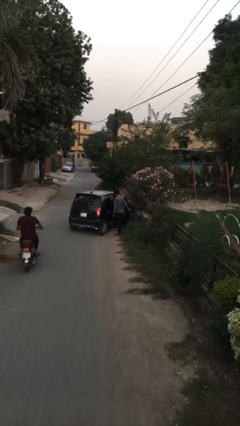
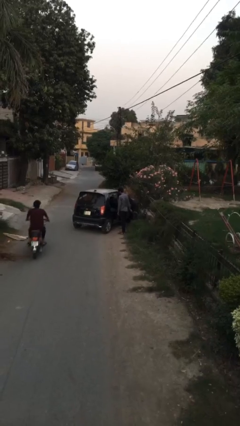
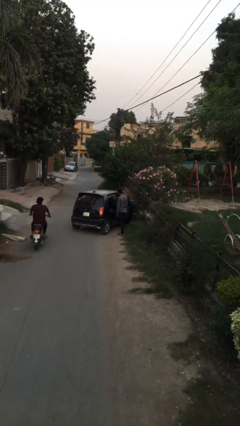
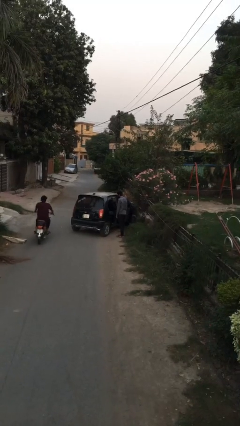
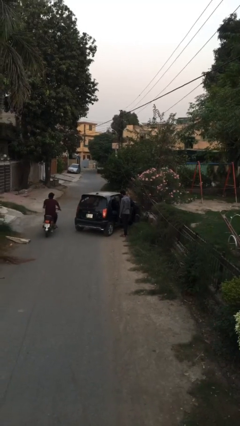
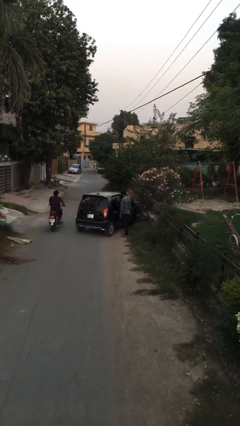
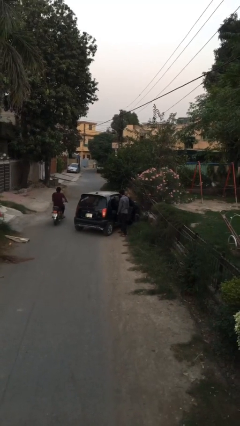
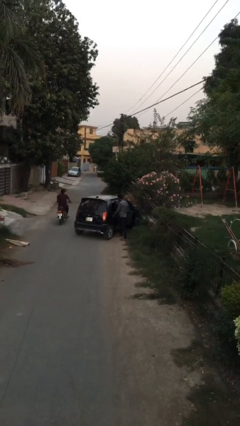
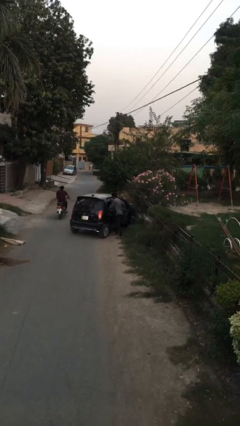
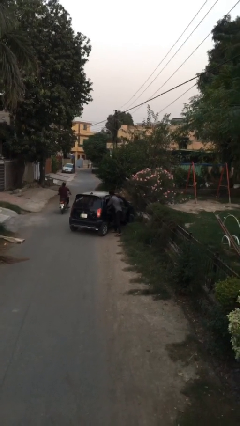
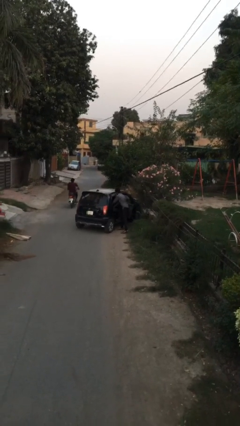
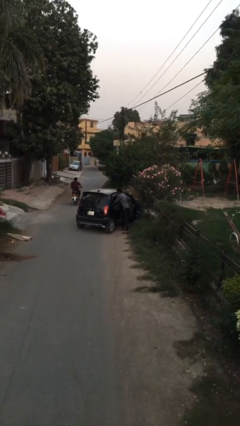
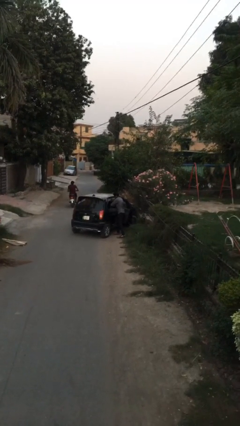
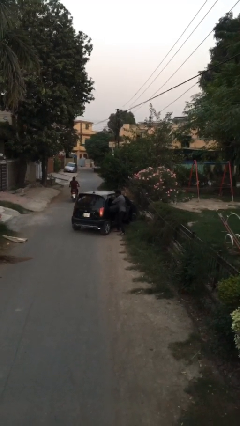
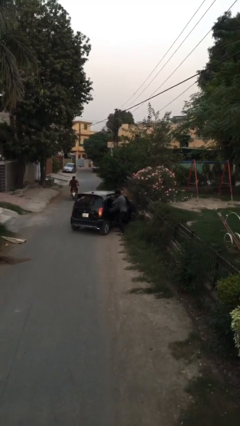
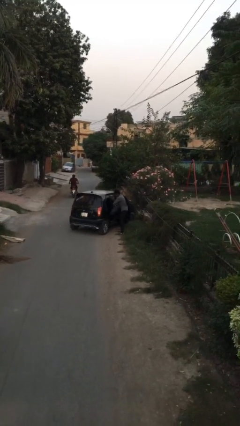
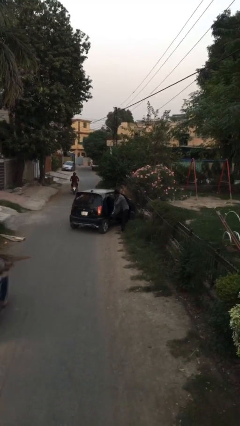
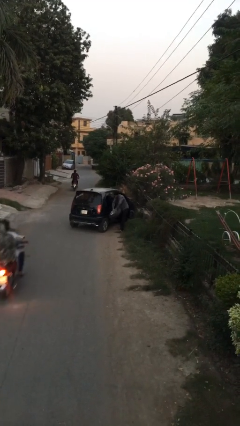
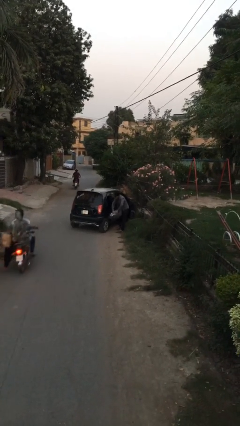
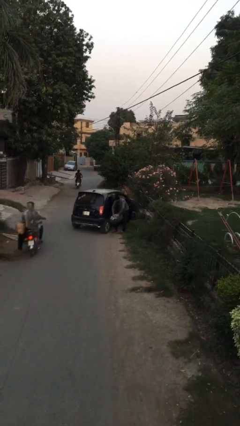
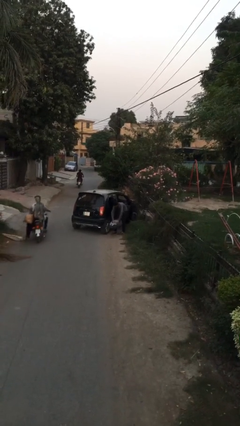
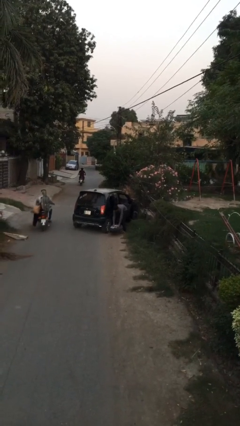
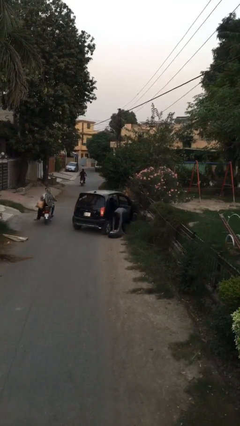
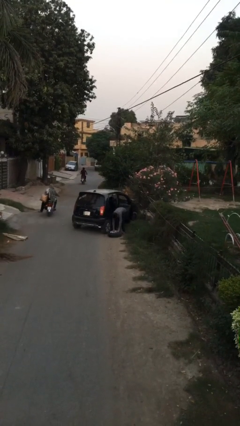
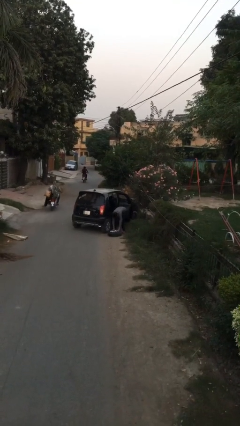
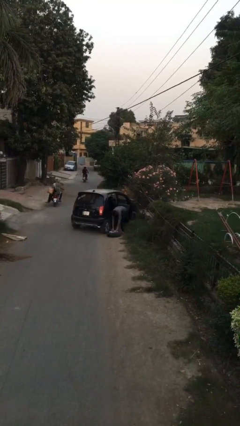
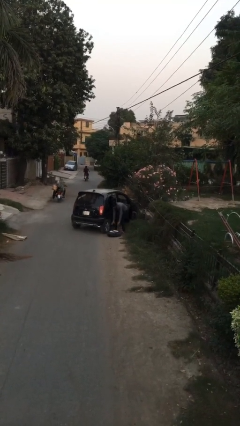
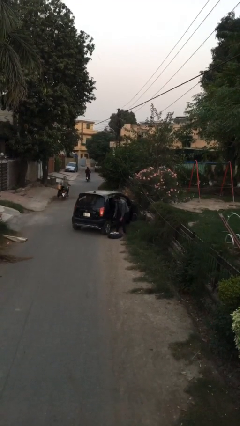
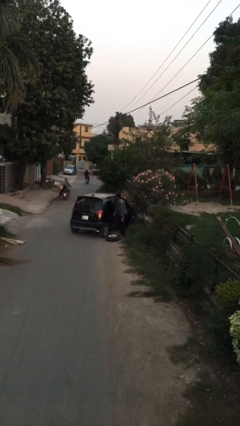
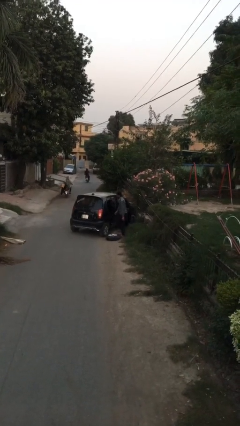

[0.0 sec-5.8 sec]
person unloads car

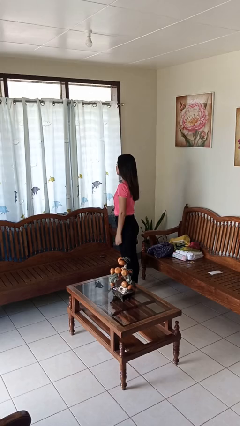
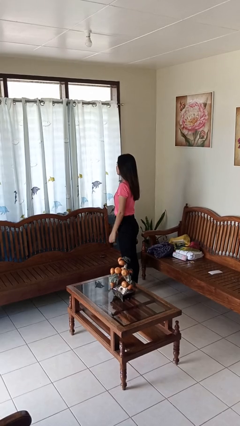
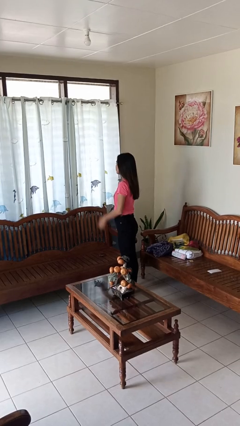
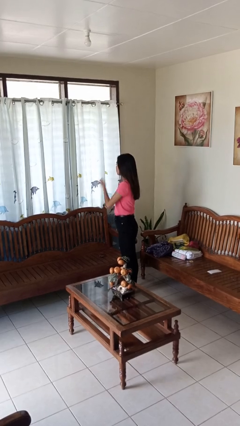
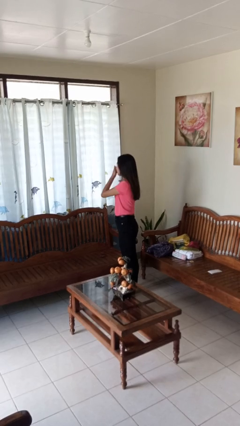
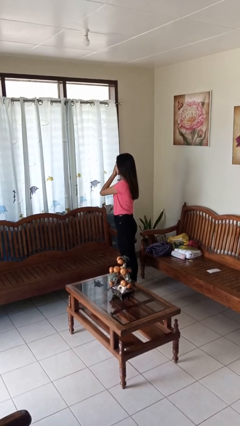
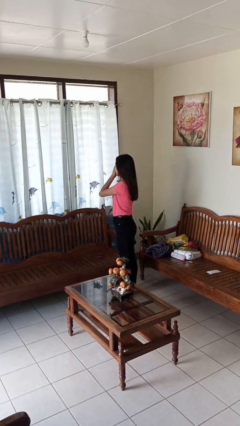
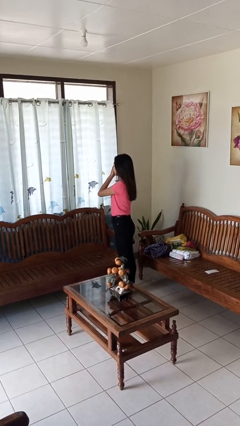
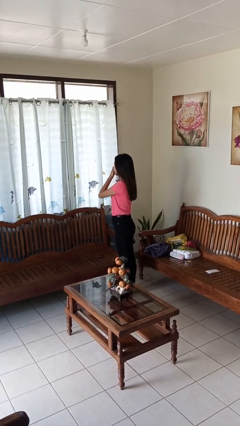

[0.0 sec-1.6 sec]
person yawns

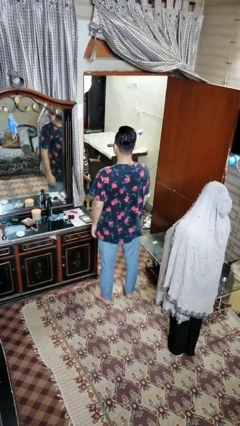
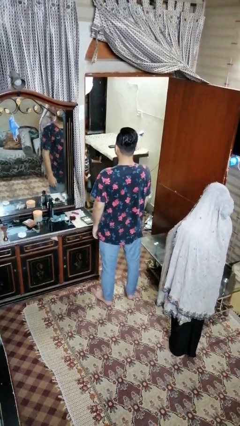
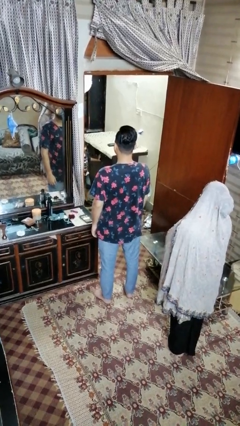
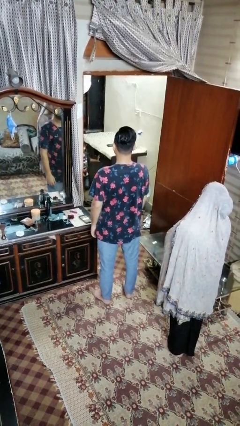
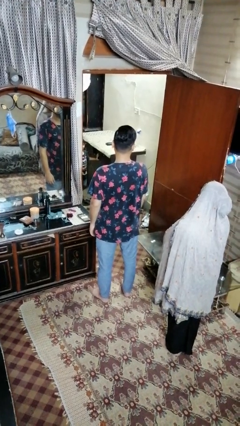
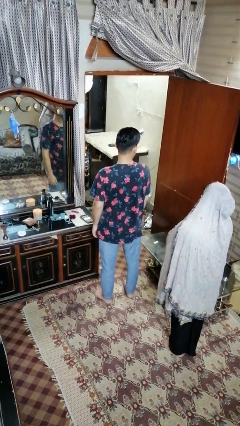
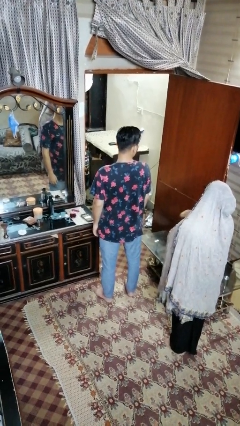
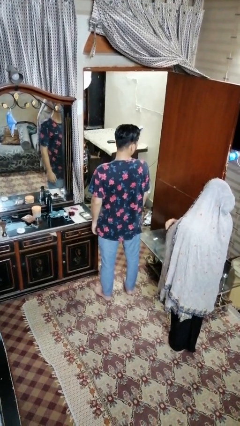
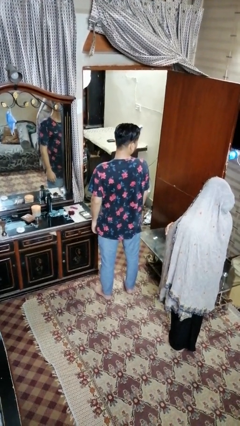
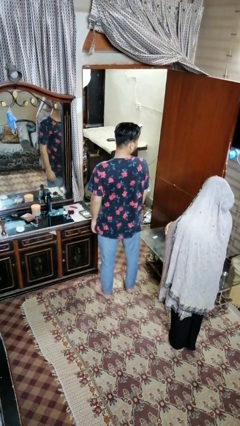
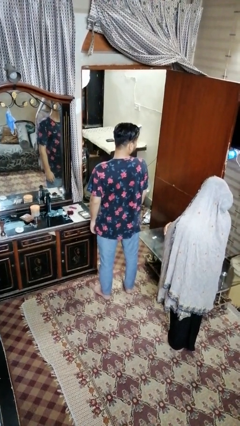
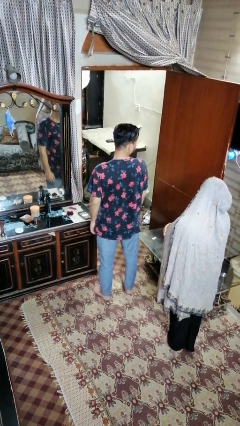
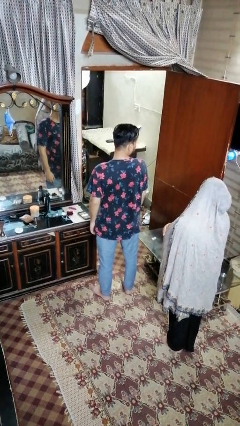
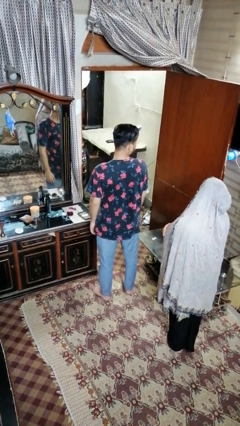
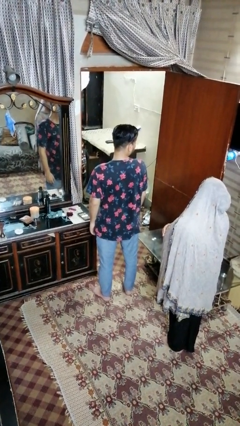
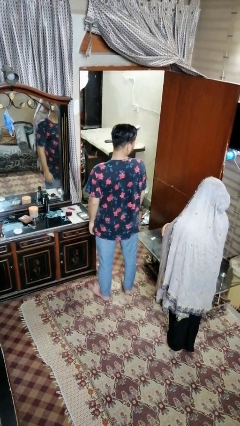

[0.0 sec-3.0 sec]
person looks over shoulder

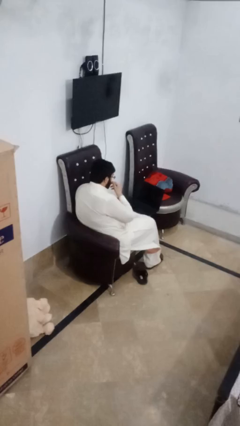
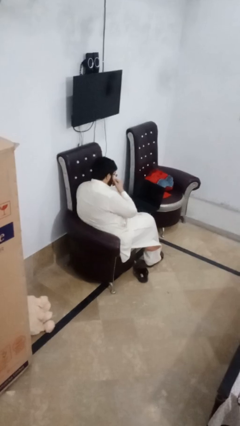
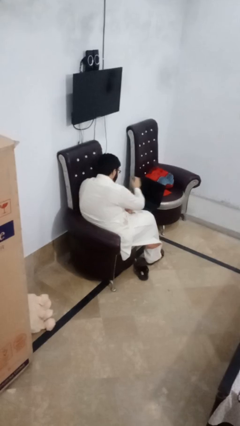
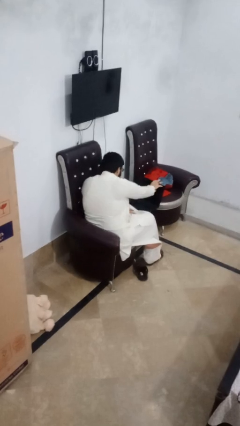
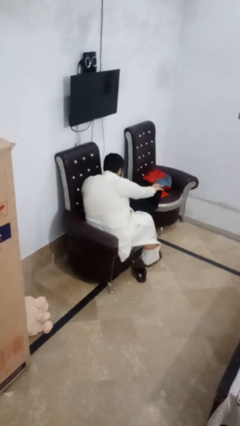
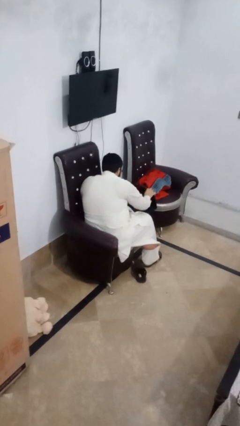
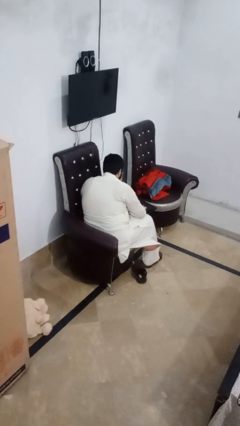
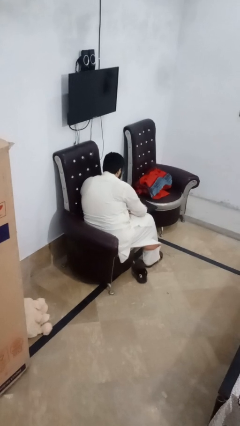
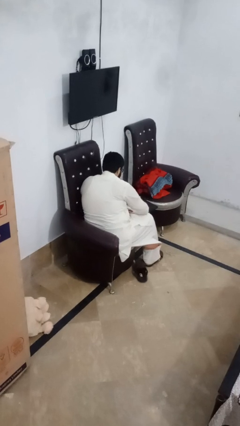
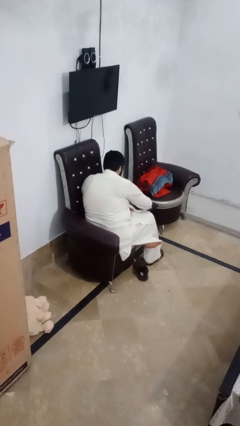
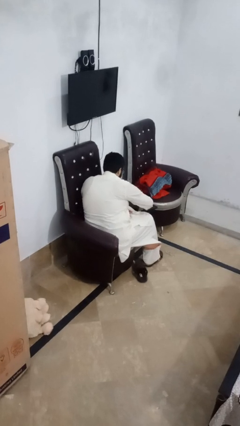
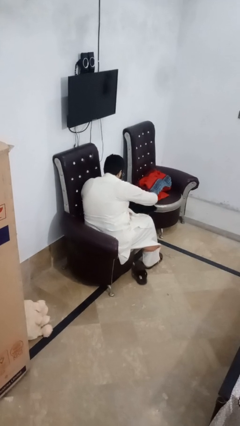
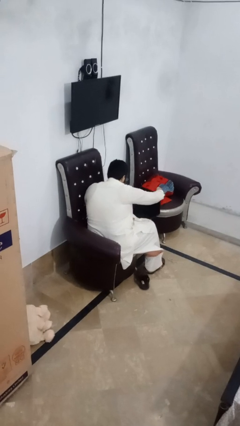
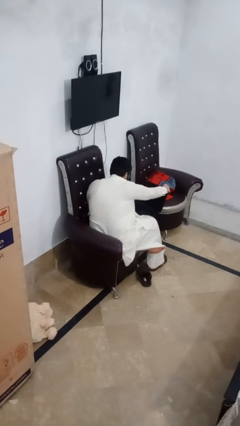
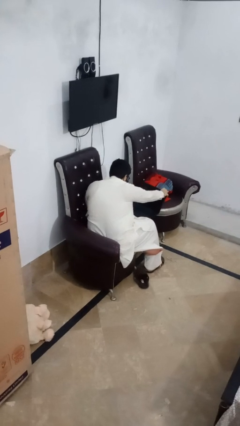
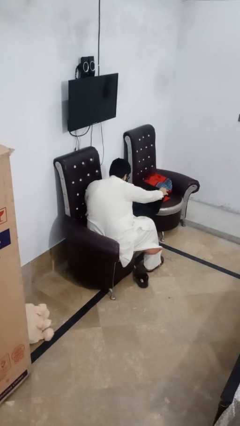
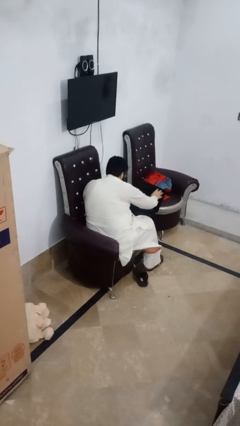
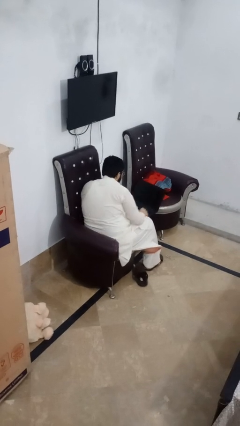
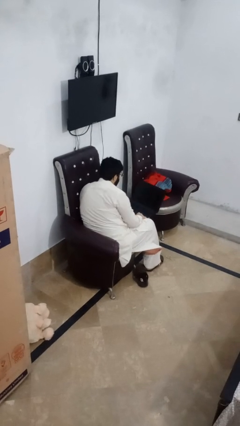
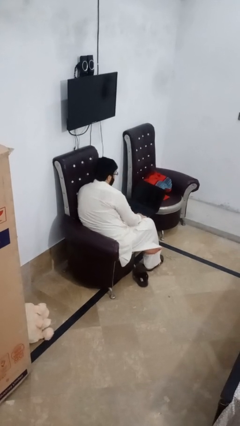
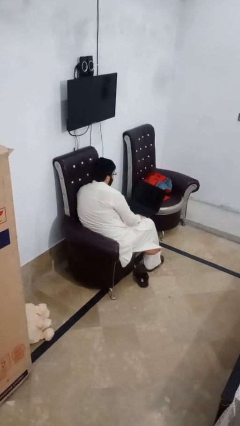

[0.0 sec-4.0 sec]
person opens laptop

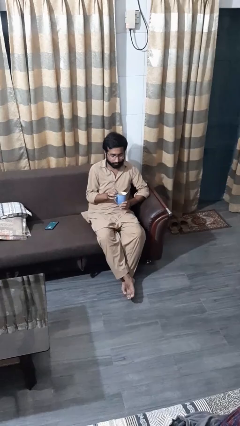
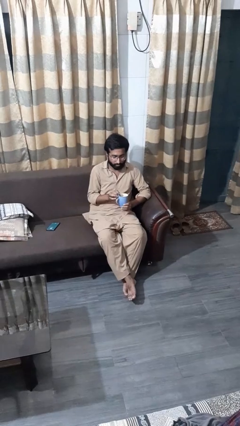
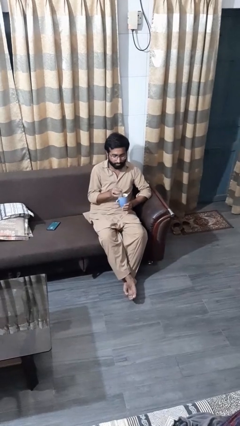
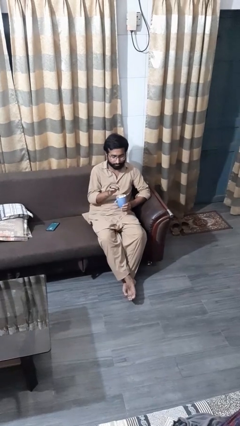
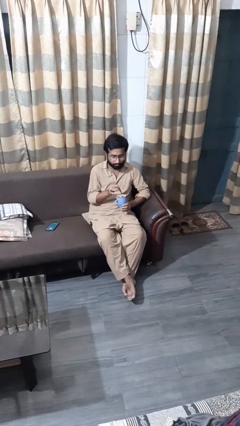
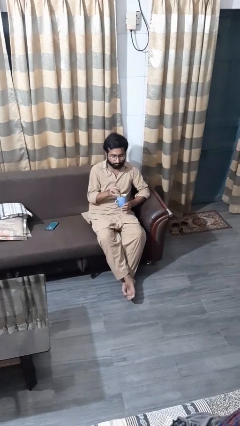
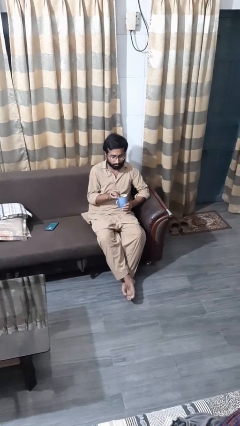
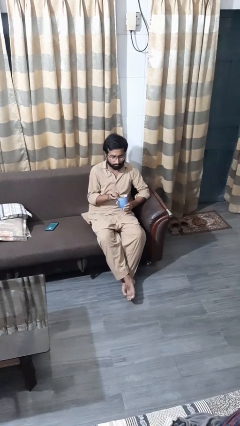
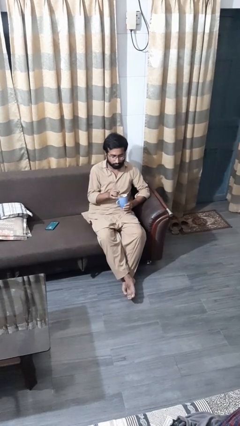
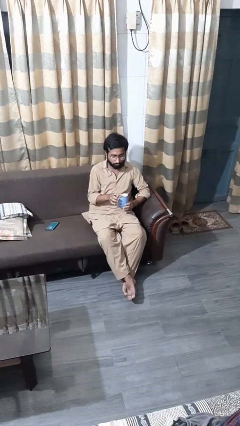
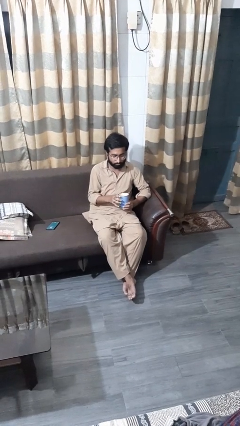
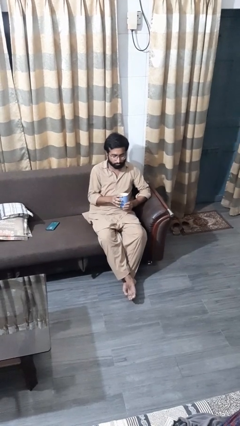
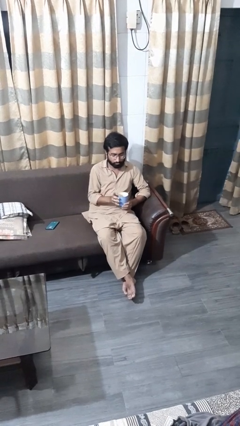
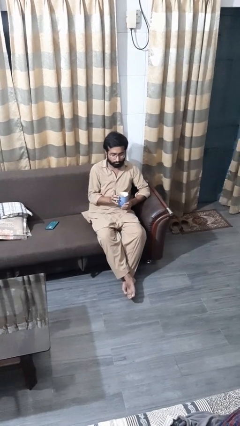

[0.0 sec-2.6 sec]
person stirs mug

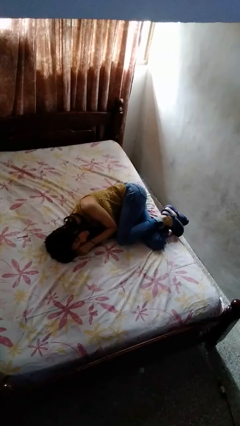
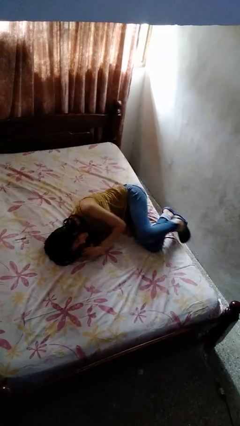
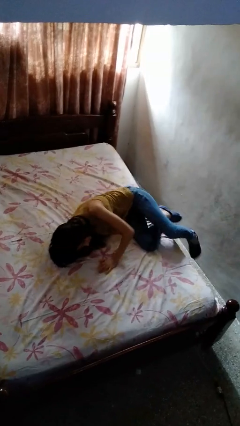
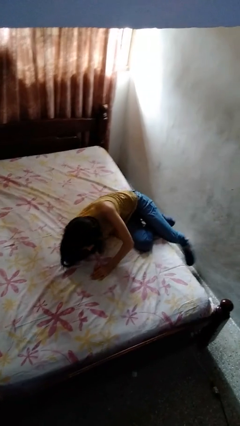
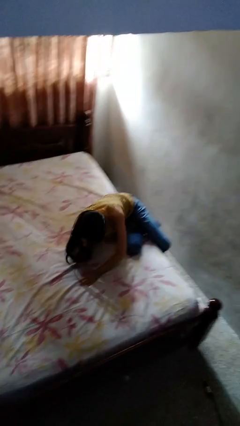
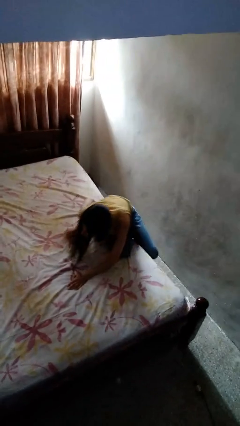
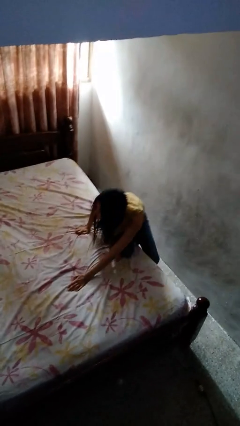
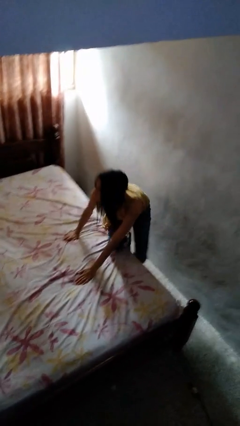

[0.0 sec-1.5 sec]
person stands up
